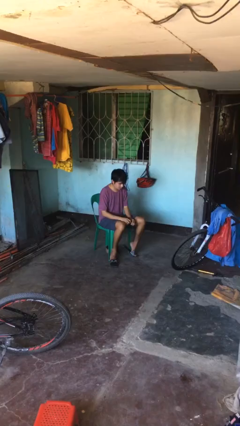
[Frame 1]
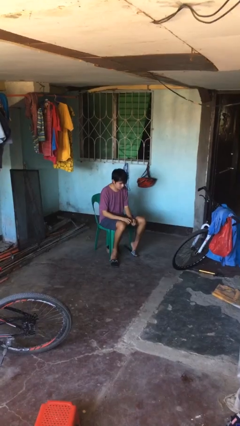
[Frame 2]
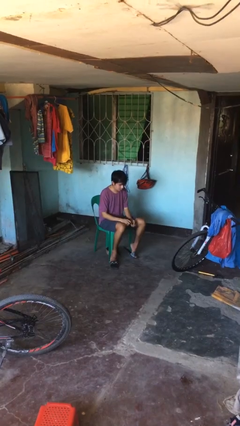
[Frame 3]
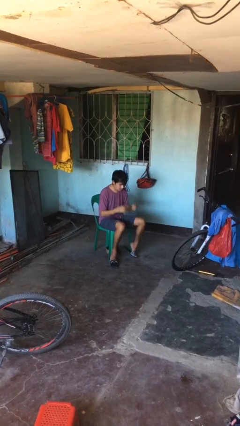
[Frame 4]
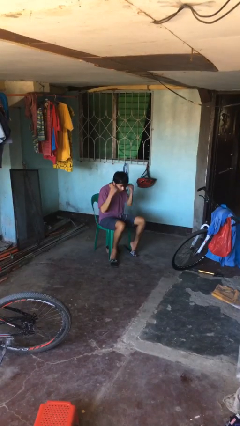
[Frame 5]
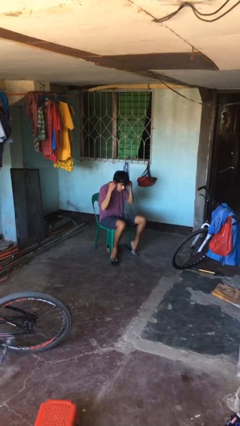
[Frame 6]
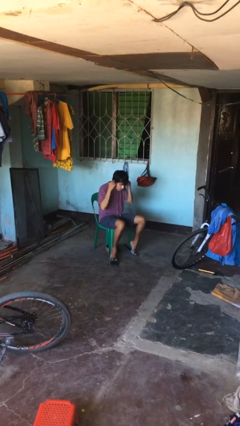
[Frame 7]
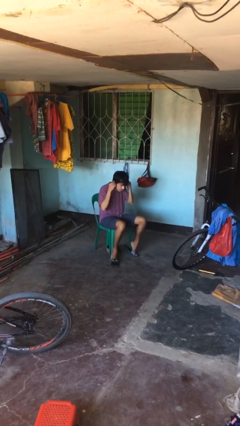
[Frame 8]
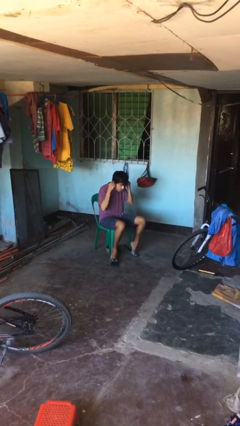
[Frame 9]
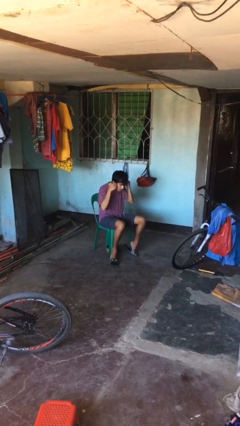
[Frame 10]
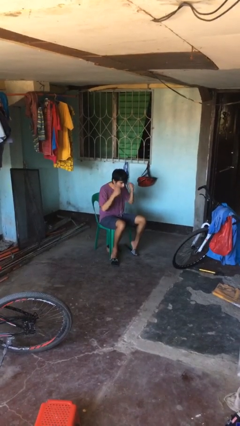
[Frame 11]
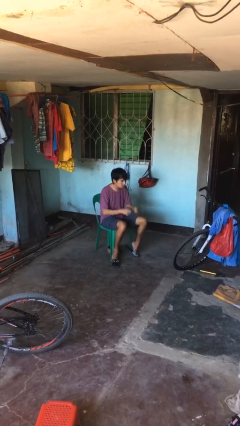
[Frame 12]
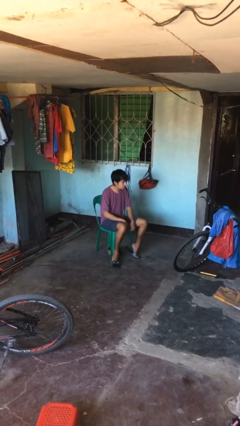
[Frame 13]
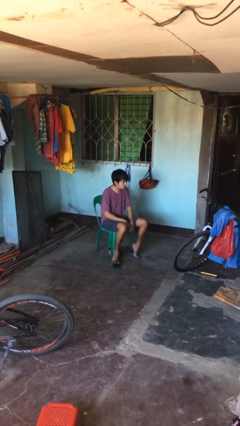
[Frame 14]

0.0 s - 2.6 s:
person puts on headphones

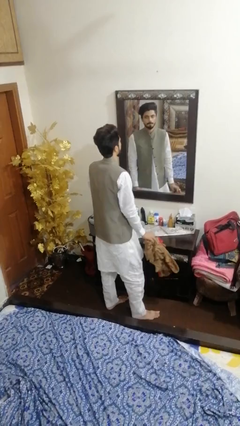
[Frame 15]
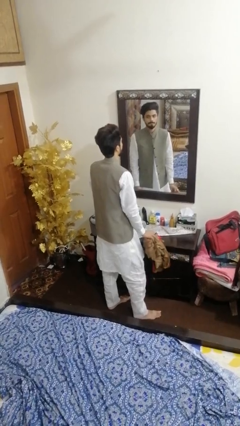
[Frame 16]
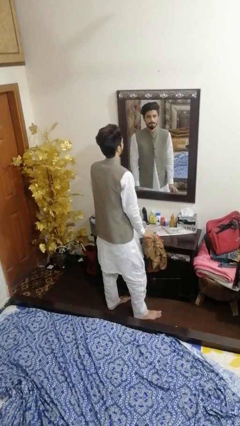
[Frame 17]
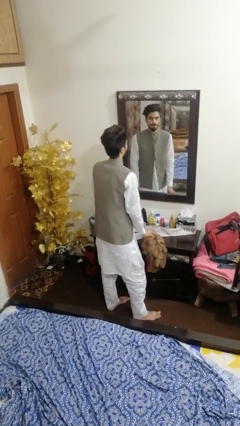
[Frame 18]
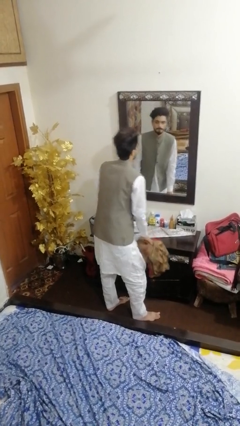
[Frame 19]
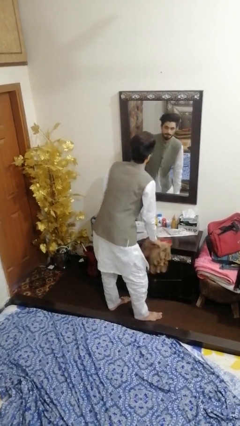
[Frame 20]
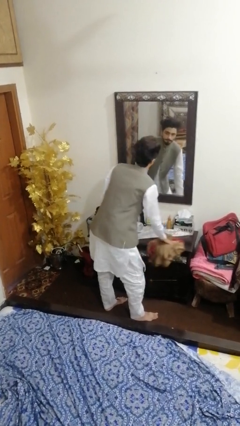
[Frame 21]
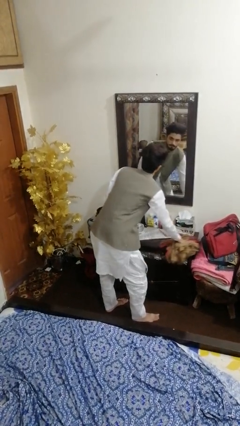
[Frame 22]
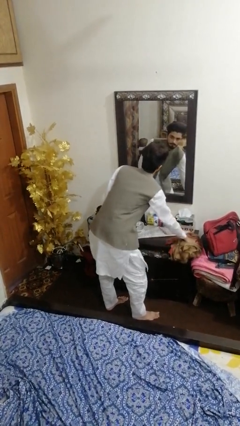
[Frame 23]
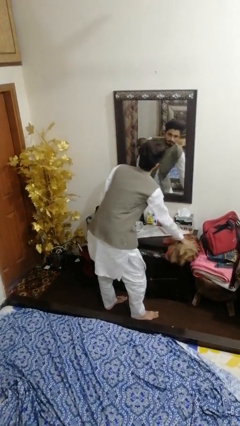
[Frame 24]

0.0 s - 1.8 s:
person cleans table with rag

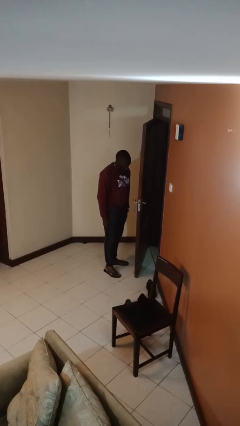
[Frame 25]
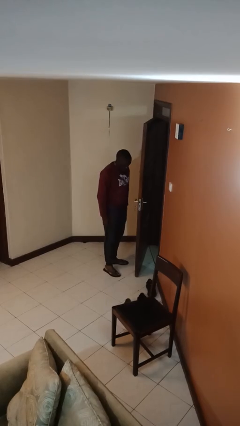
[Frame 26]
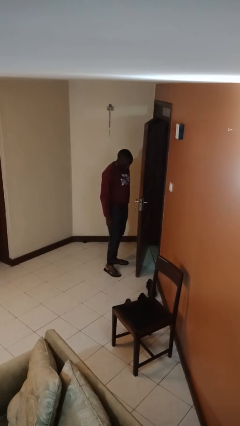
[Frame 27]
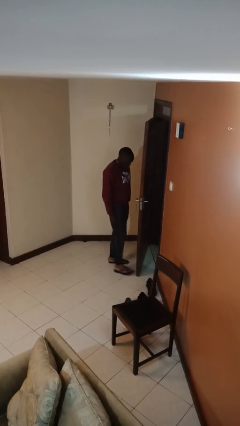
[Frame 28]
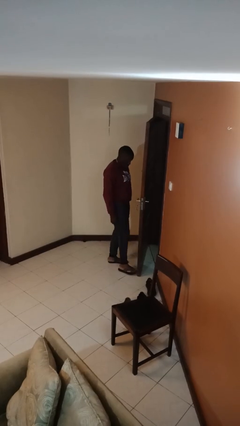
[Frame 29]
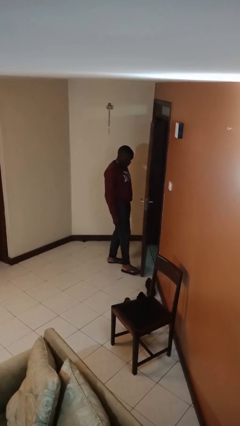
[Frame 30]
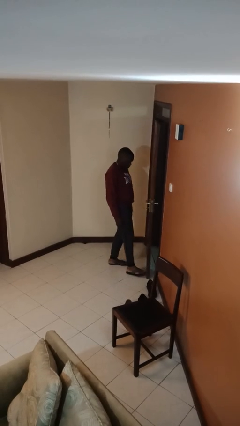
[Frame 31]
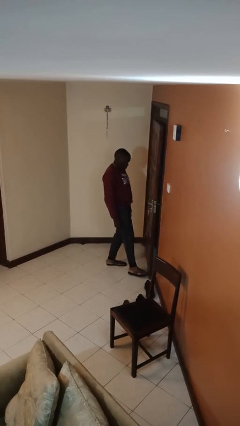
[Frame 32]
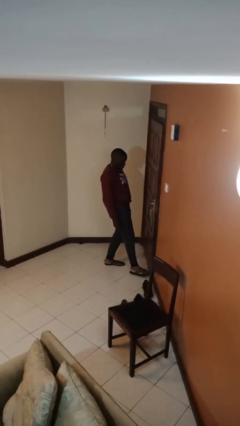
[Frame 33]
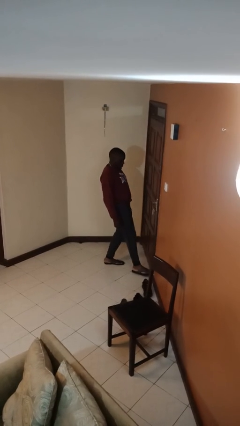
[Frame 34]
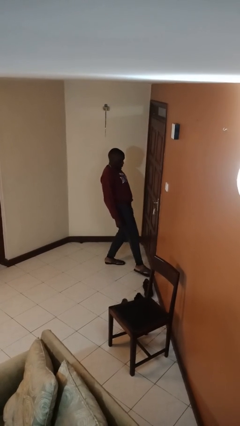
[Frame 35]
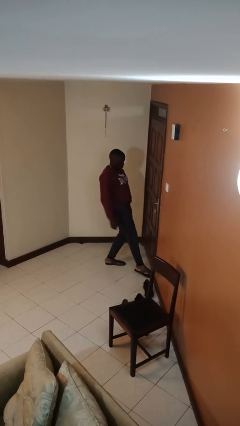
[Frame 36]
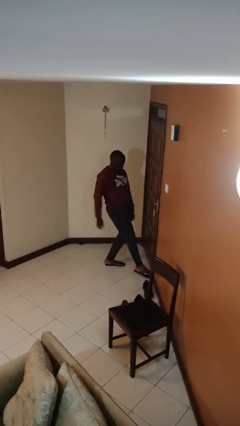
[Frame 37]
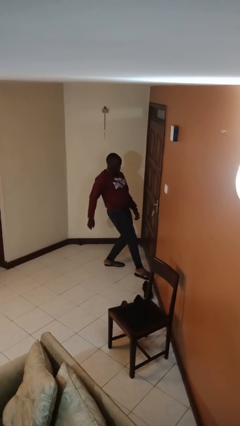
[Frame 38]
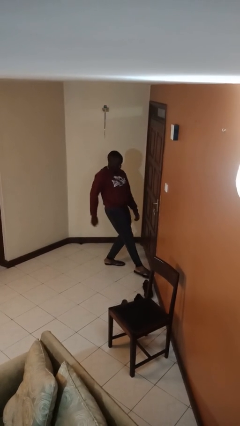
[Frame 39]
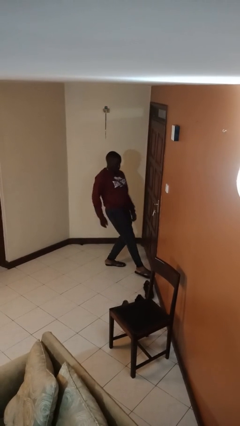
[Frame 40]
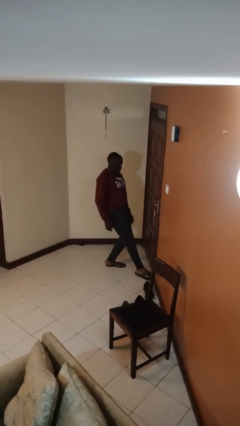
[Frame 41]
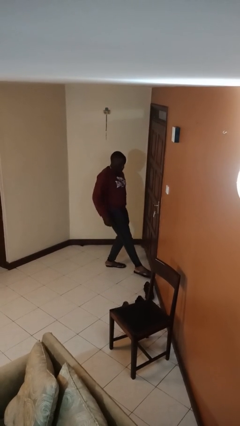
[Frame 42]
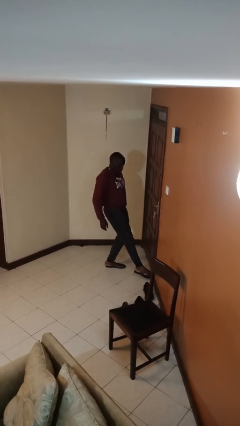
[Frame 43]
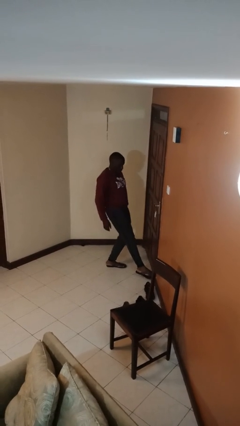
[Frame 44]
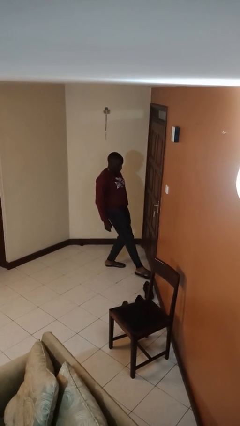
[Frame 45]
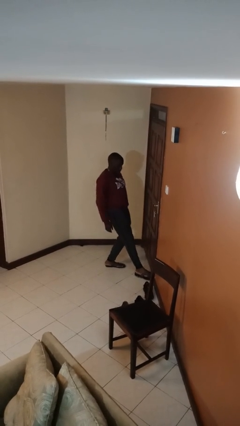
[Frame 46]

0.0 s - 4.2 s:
person closes door with foot

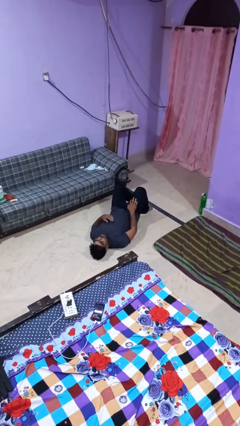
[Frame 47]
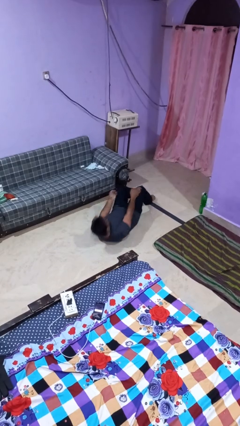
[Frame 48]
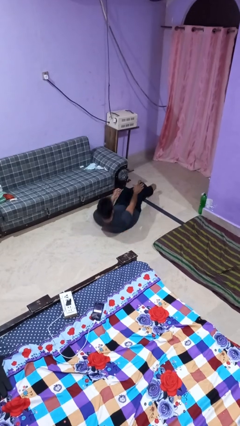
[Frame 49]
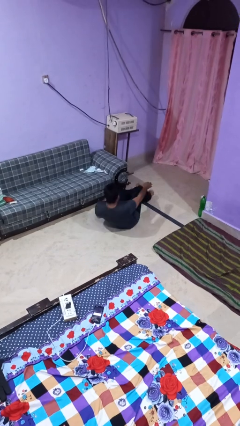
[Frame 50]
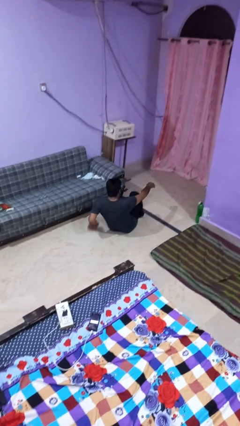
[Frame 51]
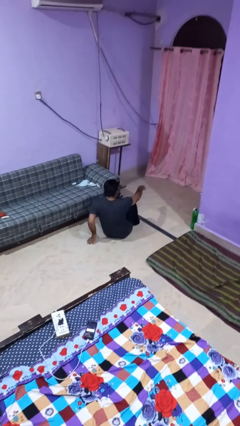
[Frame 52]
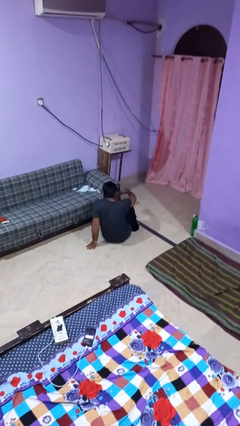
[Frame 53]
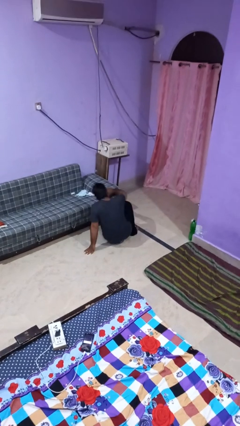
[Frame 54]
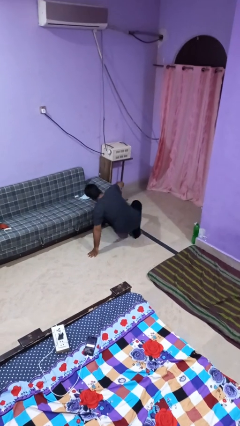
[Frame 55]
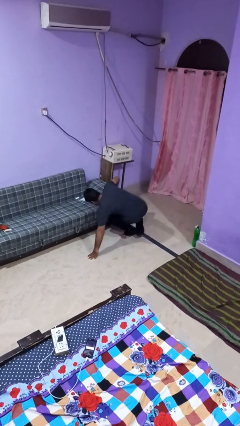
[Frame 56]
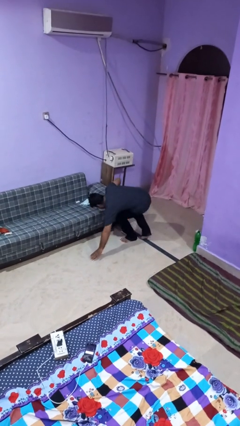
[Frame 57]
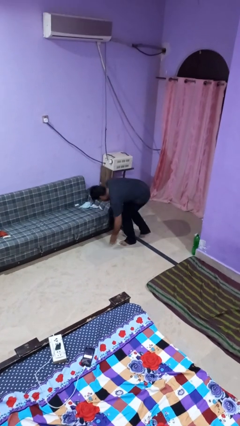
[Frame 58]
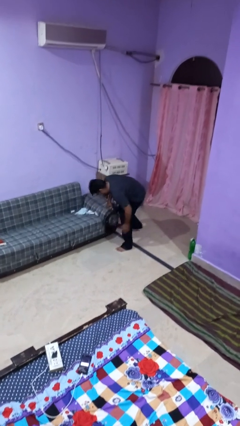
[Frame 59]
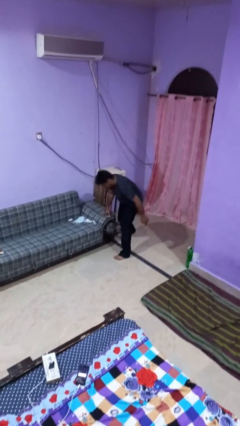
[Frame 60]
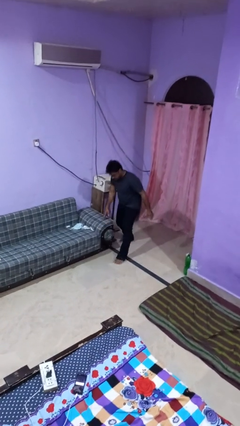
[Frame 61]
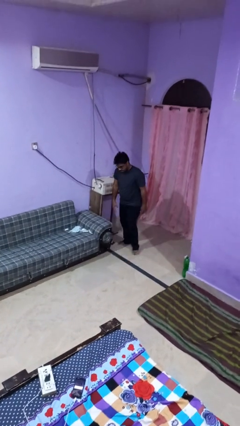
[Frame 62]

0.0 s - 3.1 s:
person stands up from floor

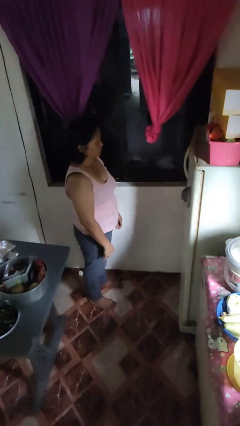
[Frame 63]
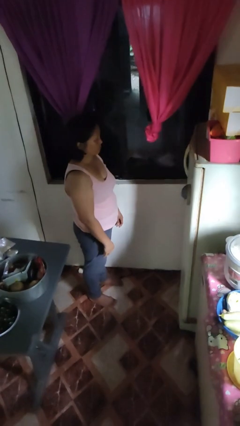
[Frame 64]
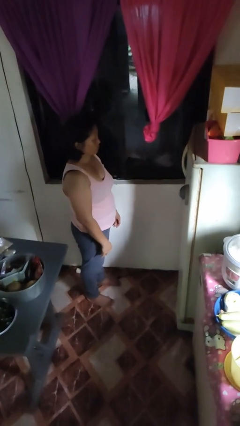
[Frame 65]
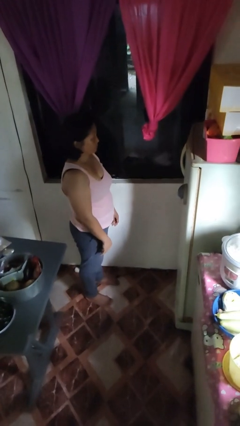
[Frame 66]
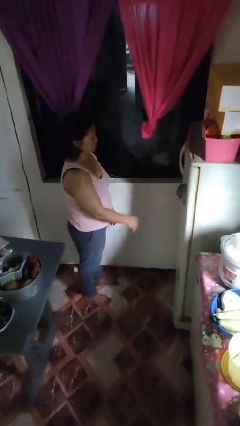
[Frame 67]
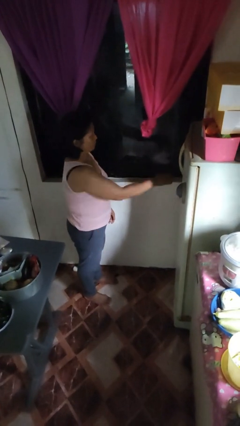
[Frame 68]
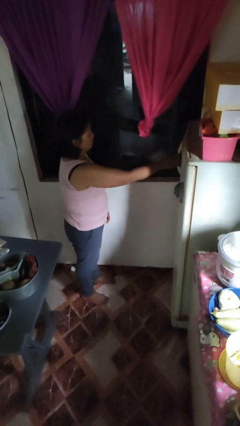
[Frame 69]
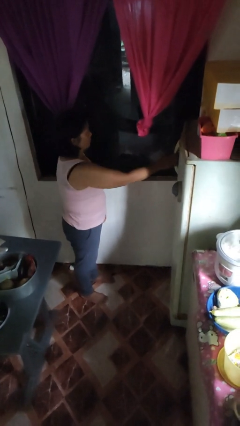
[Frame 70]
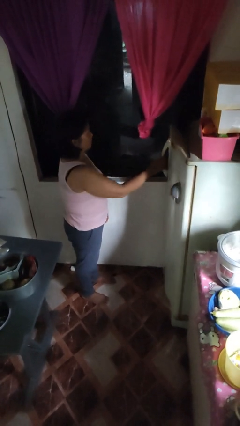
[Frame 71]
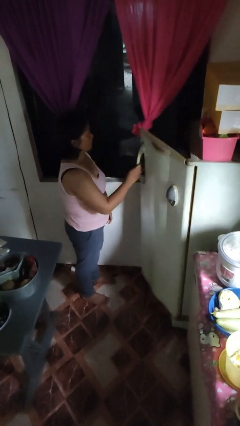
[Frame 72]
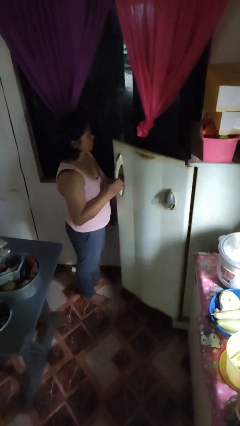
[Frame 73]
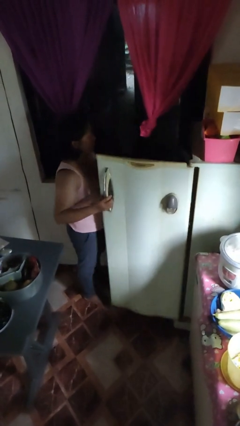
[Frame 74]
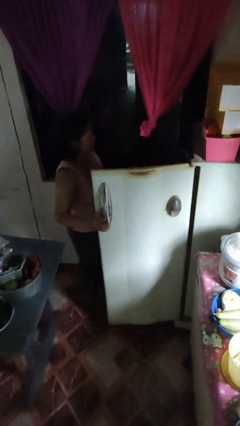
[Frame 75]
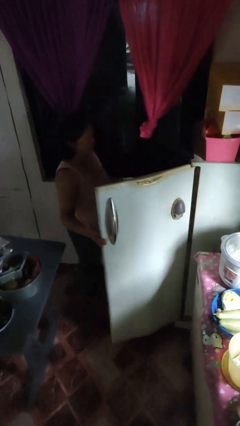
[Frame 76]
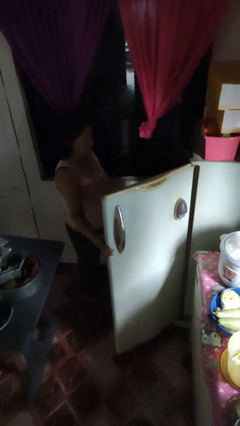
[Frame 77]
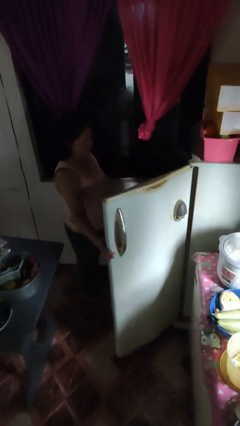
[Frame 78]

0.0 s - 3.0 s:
person opens refrigerator

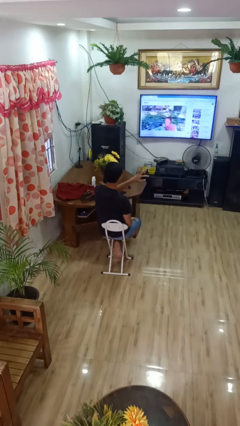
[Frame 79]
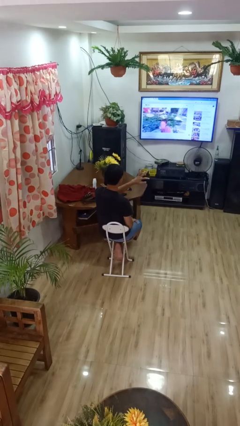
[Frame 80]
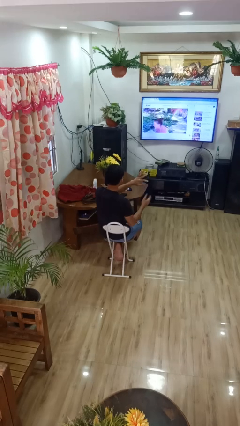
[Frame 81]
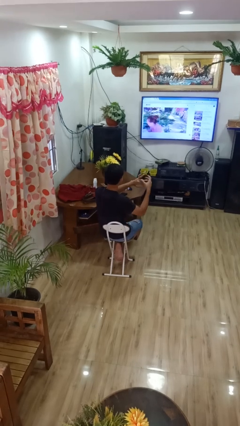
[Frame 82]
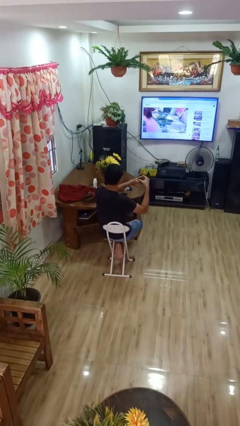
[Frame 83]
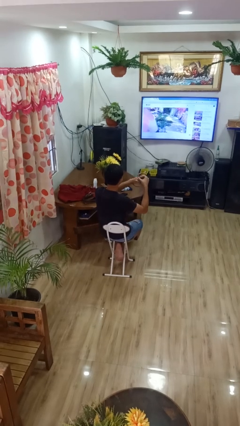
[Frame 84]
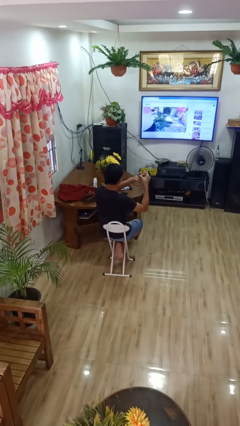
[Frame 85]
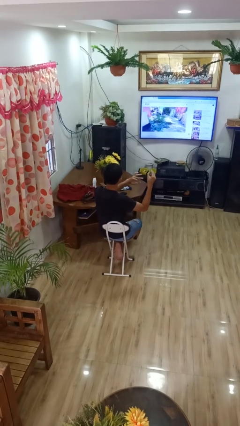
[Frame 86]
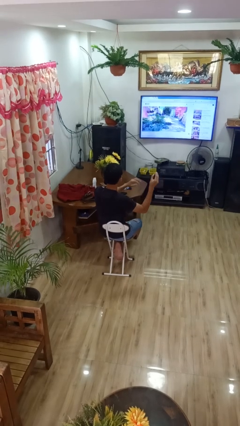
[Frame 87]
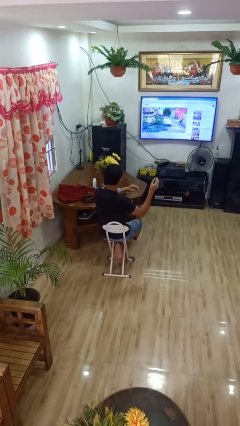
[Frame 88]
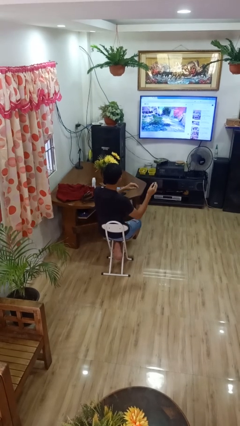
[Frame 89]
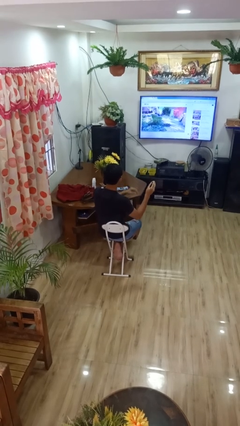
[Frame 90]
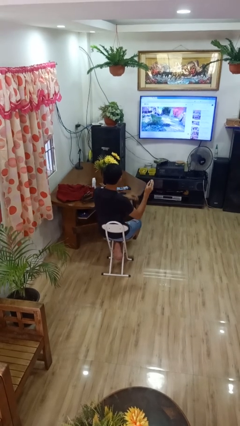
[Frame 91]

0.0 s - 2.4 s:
person takes off ring

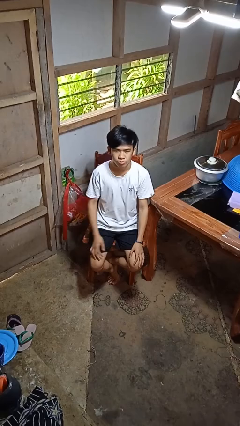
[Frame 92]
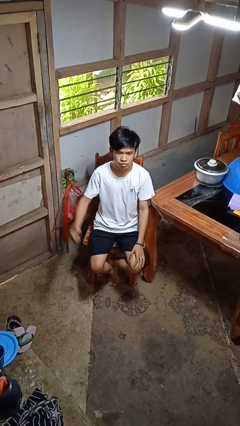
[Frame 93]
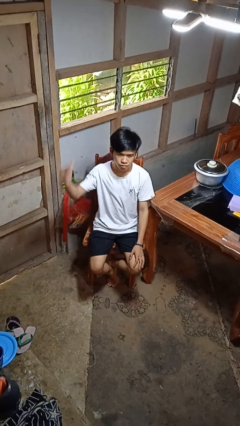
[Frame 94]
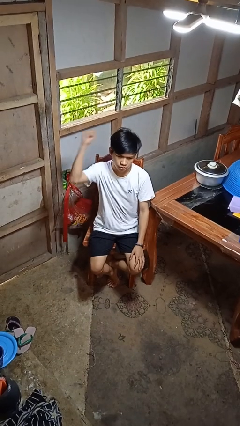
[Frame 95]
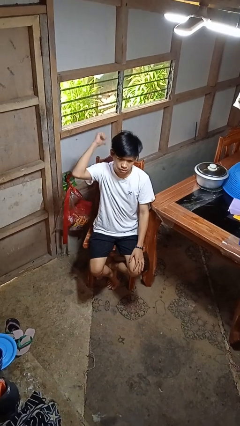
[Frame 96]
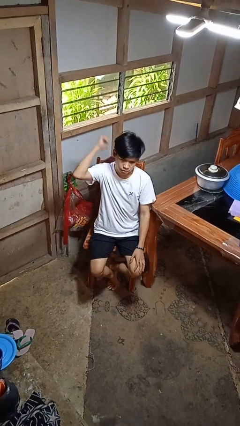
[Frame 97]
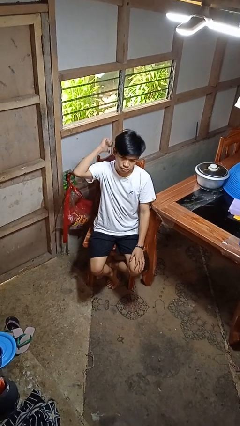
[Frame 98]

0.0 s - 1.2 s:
person gestures behind me
